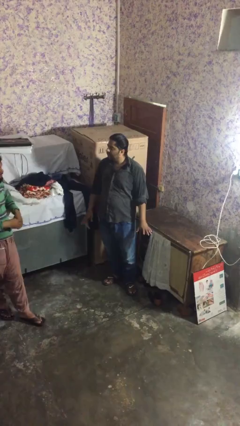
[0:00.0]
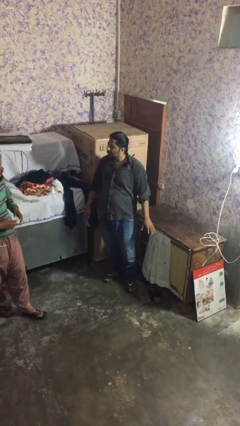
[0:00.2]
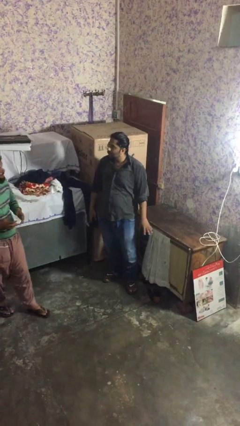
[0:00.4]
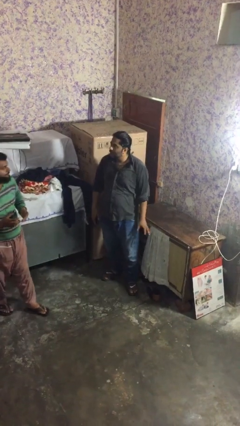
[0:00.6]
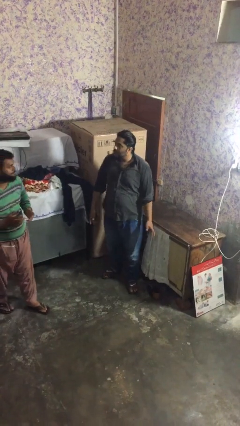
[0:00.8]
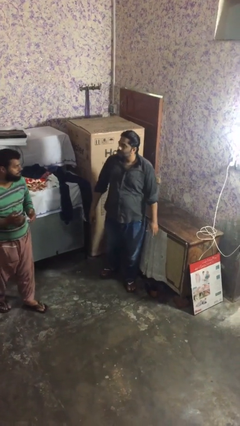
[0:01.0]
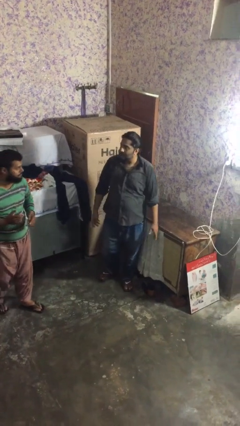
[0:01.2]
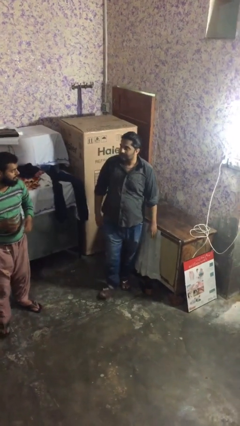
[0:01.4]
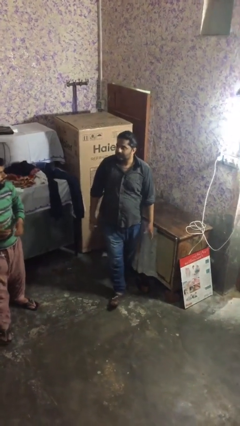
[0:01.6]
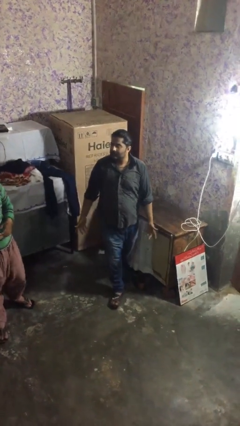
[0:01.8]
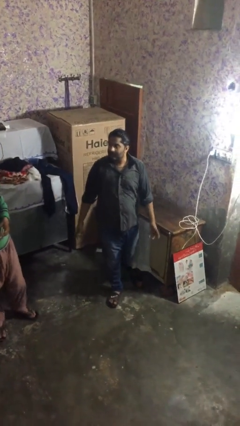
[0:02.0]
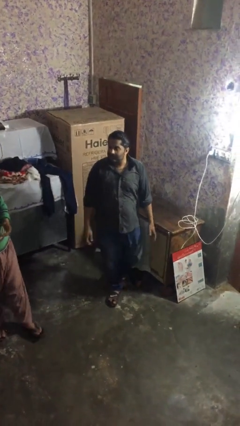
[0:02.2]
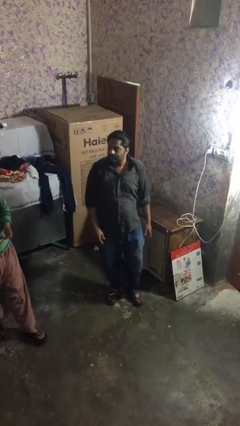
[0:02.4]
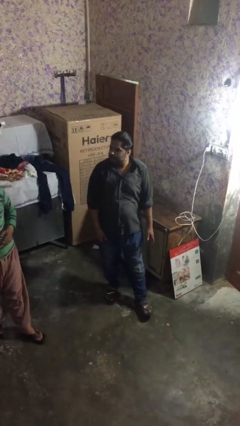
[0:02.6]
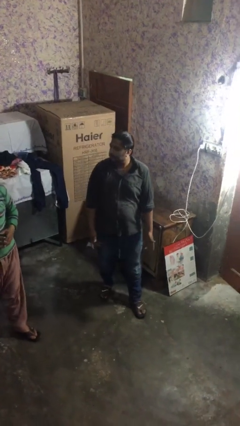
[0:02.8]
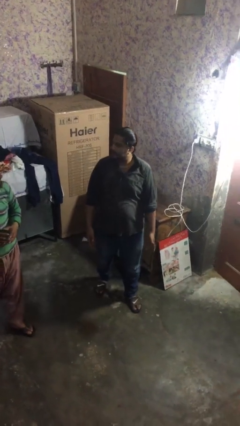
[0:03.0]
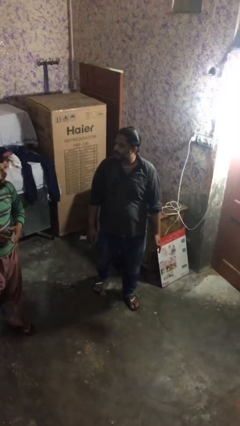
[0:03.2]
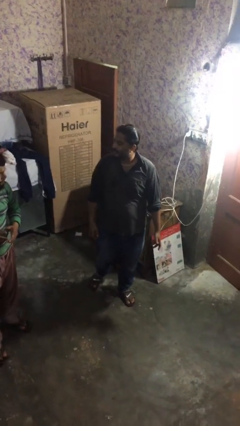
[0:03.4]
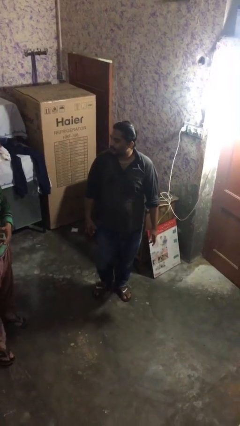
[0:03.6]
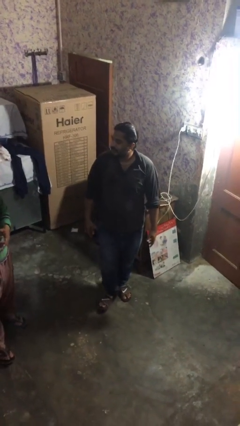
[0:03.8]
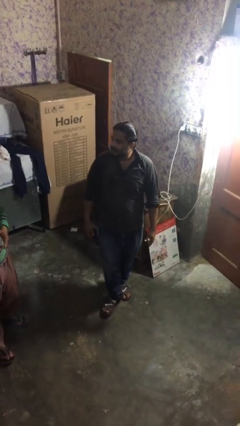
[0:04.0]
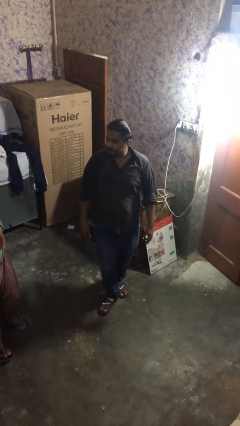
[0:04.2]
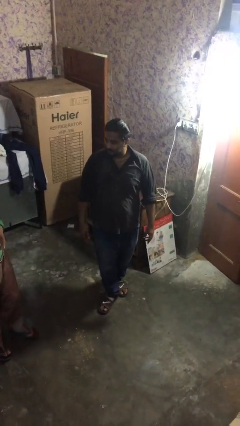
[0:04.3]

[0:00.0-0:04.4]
person talks to person

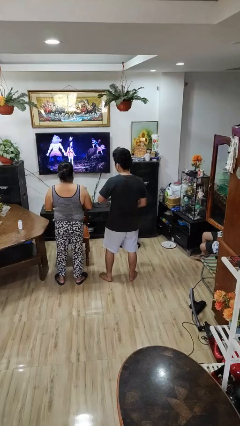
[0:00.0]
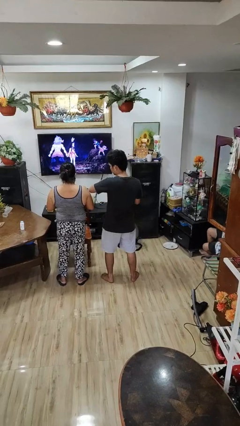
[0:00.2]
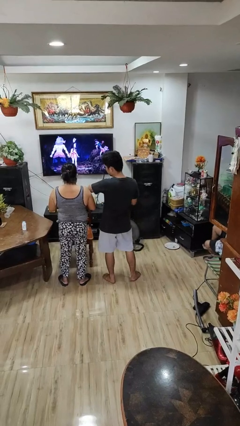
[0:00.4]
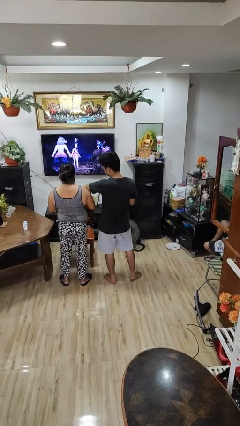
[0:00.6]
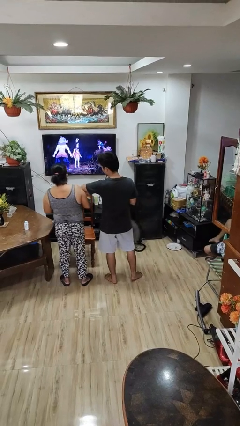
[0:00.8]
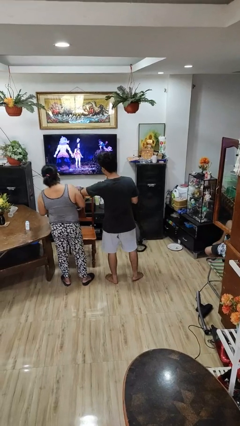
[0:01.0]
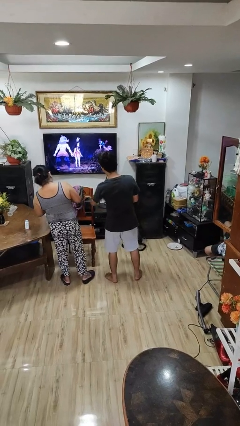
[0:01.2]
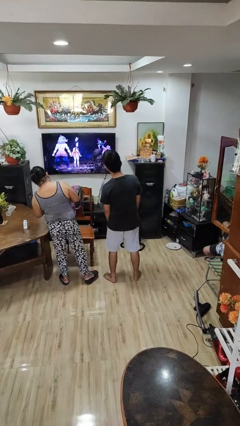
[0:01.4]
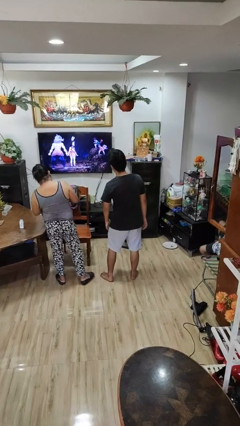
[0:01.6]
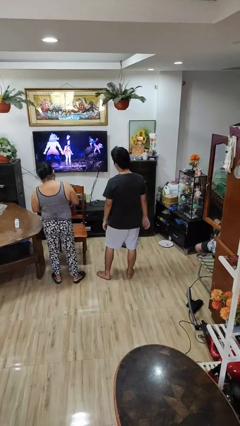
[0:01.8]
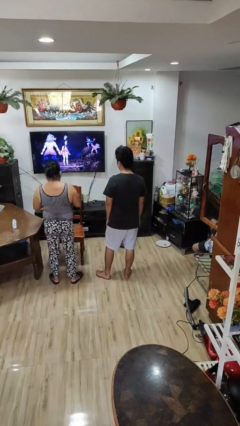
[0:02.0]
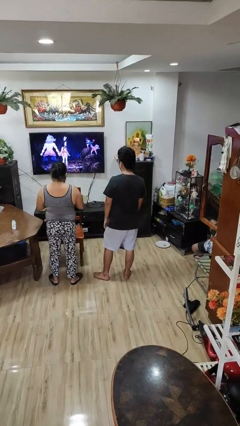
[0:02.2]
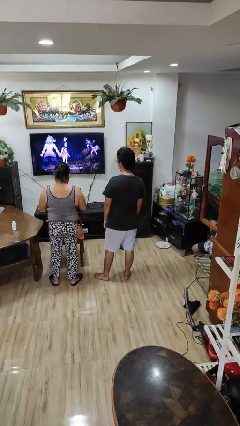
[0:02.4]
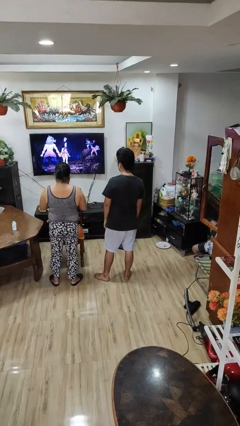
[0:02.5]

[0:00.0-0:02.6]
person shoves person

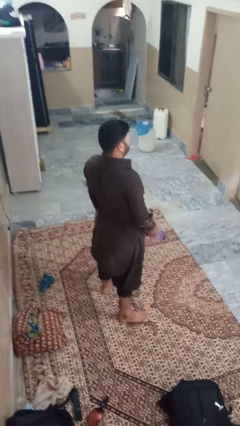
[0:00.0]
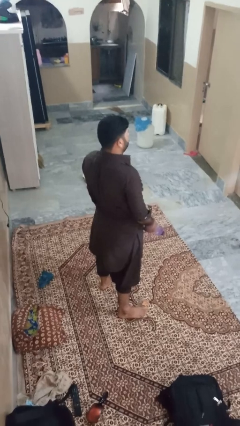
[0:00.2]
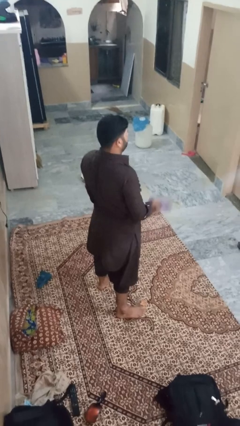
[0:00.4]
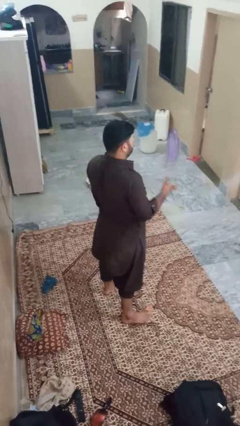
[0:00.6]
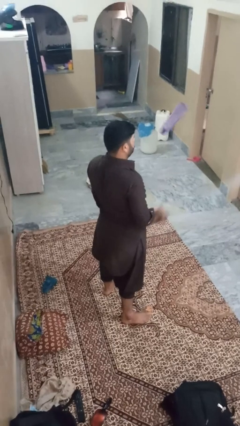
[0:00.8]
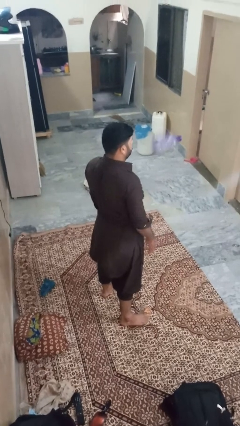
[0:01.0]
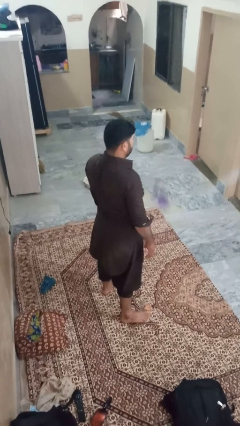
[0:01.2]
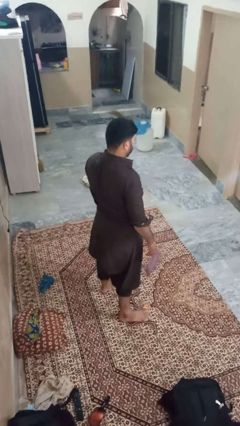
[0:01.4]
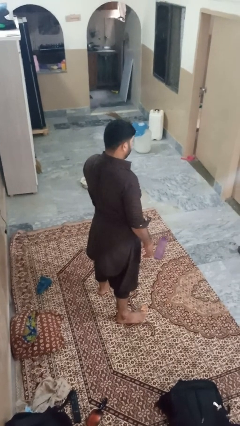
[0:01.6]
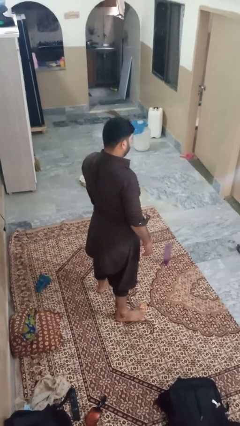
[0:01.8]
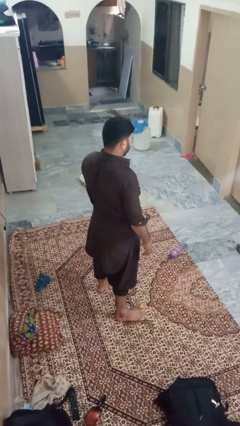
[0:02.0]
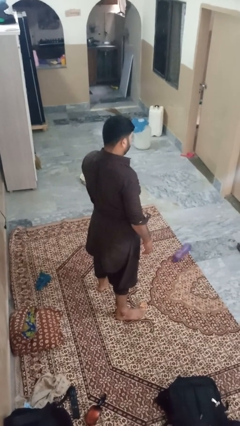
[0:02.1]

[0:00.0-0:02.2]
person throws object into air

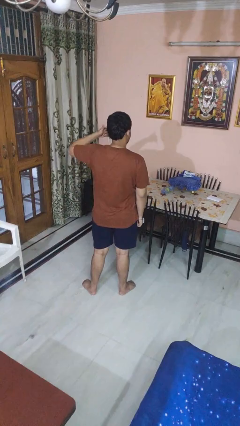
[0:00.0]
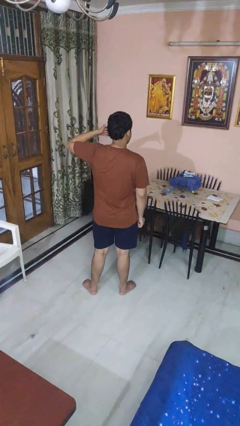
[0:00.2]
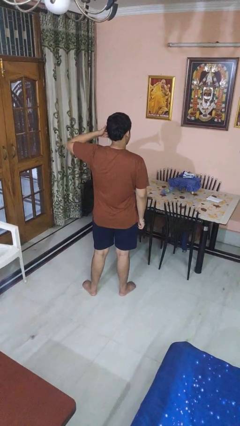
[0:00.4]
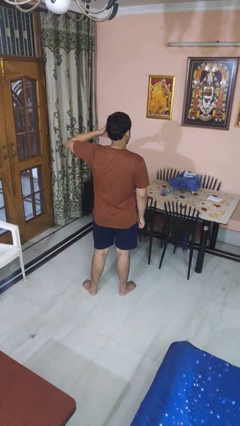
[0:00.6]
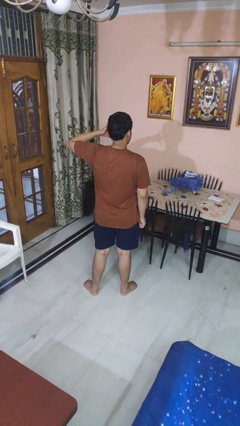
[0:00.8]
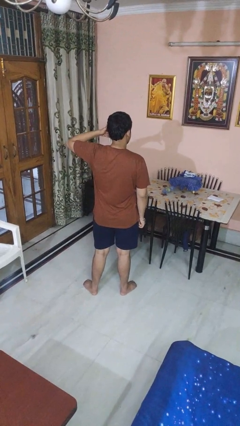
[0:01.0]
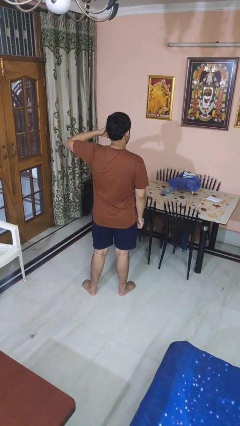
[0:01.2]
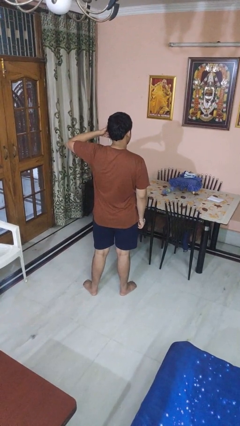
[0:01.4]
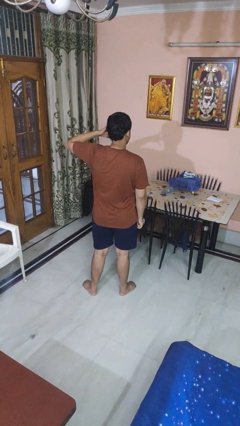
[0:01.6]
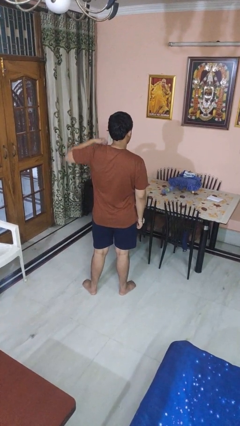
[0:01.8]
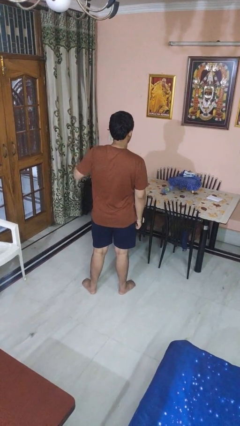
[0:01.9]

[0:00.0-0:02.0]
person gestures call me

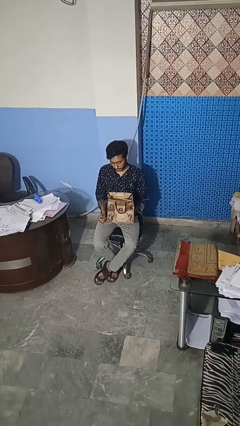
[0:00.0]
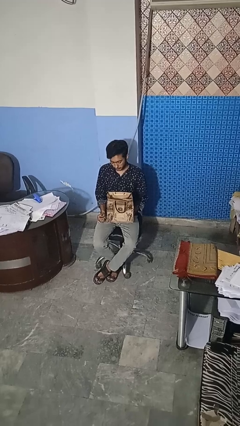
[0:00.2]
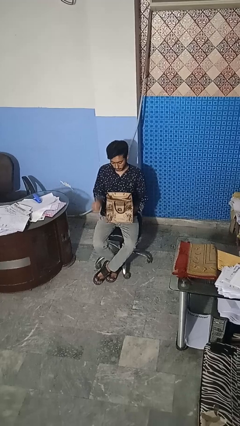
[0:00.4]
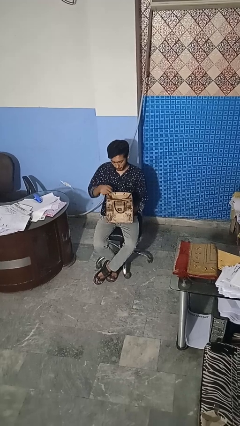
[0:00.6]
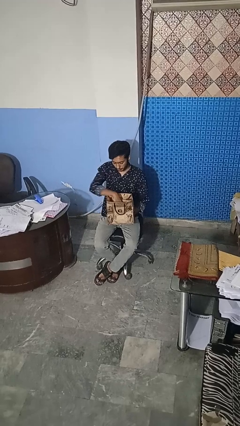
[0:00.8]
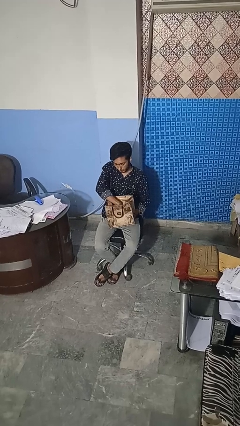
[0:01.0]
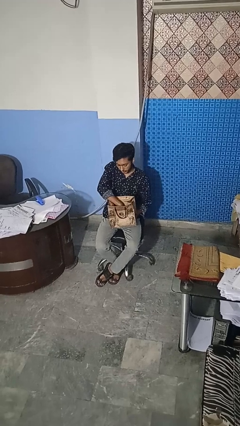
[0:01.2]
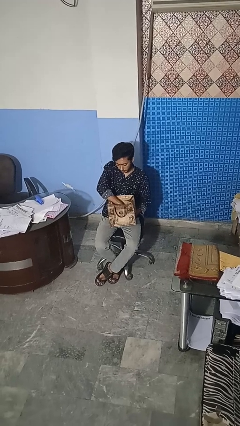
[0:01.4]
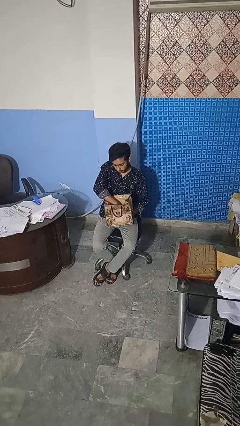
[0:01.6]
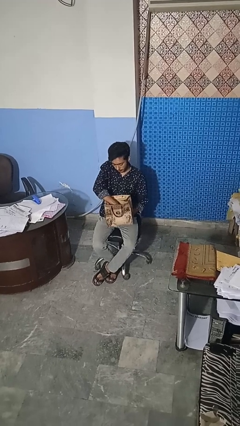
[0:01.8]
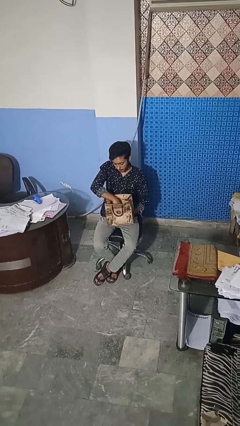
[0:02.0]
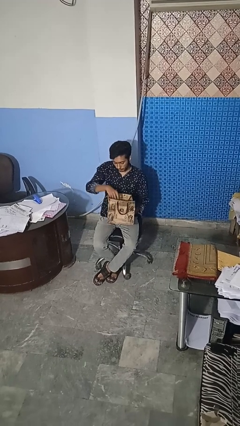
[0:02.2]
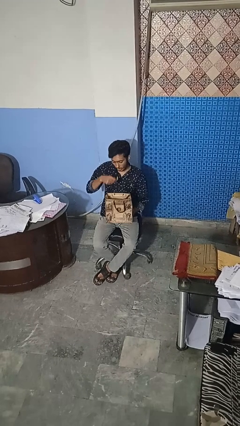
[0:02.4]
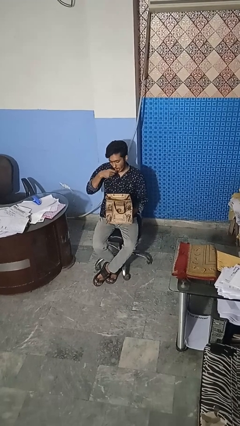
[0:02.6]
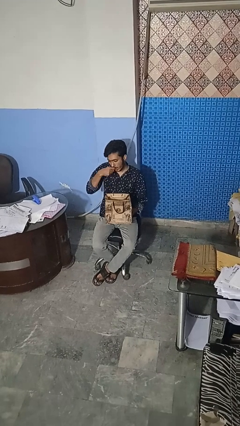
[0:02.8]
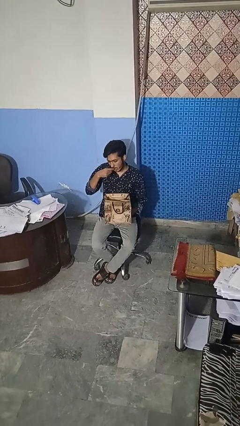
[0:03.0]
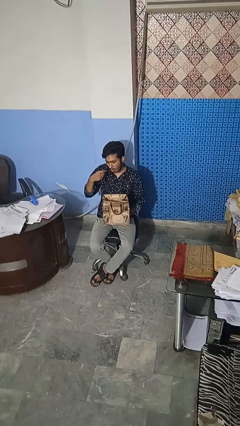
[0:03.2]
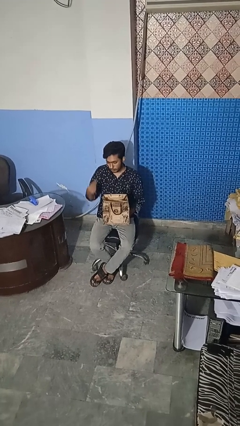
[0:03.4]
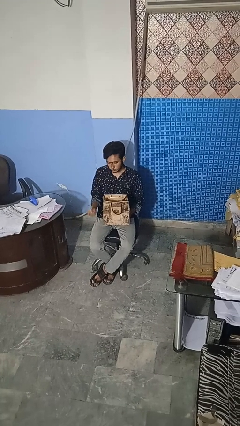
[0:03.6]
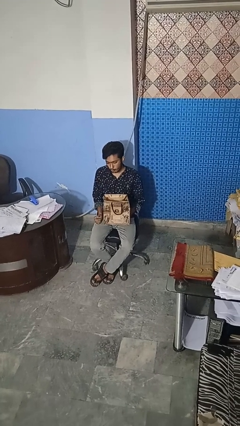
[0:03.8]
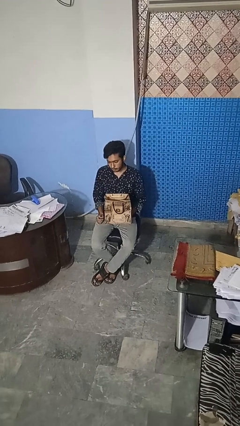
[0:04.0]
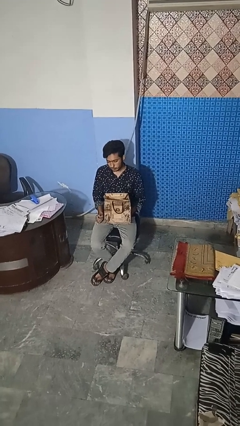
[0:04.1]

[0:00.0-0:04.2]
person eats snack from bag

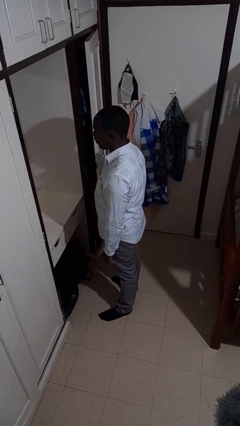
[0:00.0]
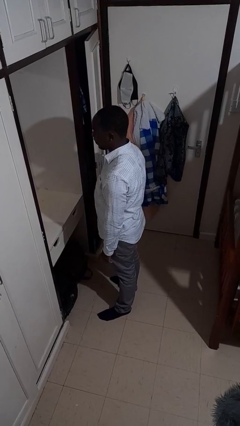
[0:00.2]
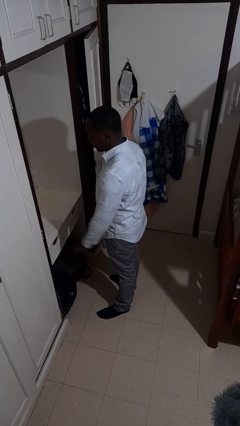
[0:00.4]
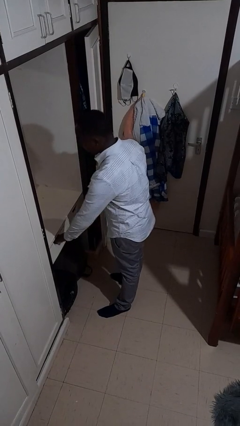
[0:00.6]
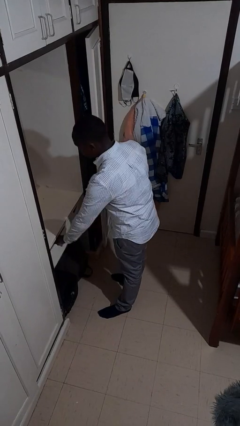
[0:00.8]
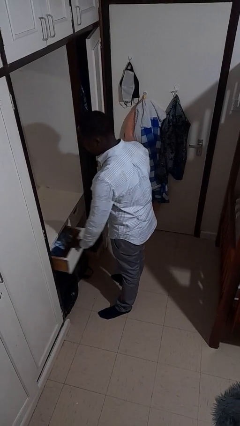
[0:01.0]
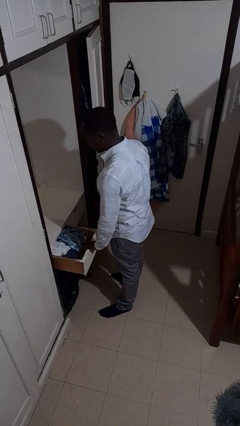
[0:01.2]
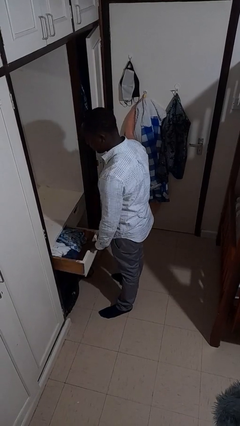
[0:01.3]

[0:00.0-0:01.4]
person opens dresser drawer

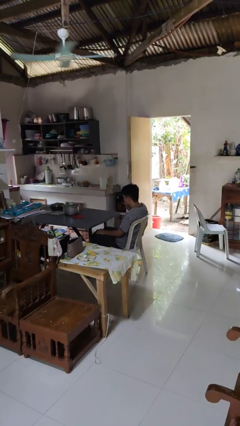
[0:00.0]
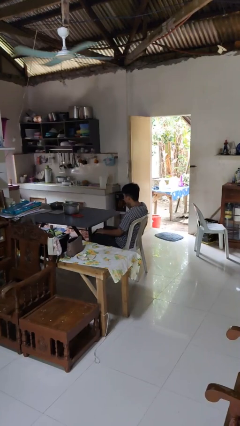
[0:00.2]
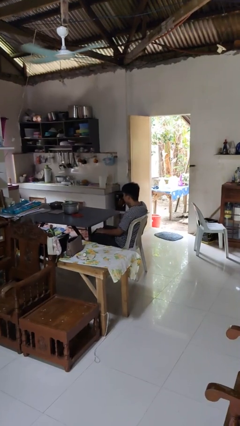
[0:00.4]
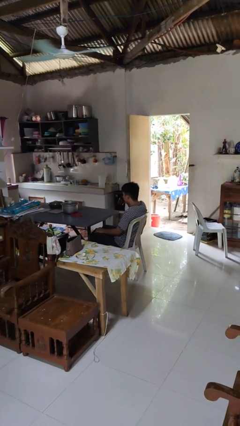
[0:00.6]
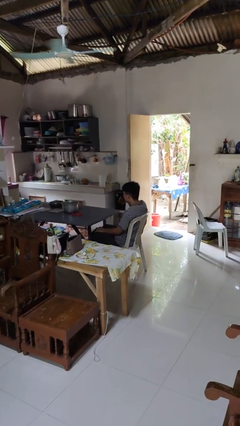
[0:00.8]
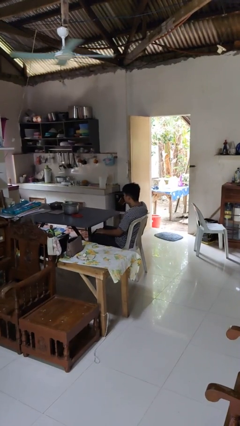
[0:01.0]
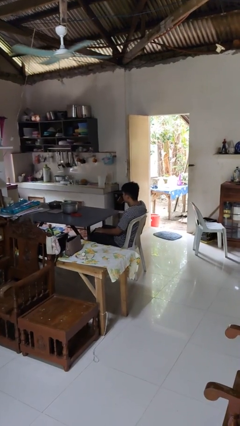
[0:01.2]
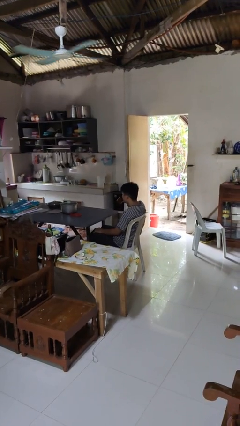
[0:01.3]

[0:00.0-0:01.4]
person drinks from mug
